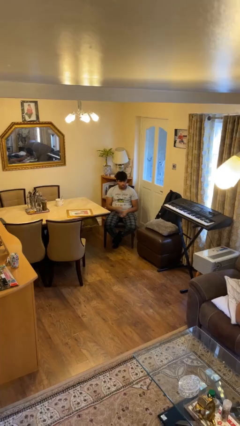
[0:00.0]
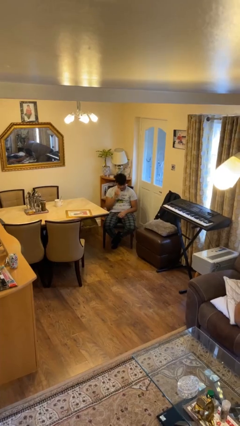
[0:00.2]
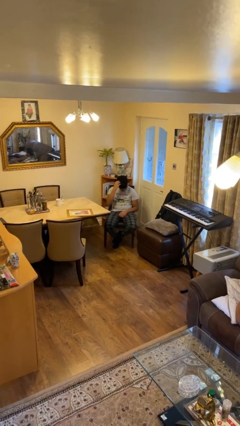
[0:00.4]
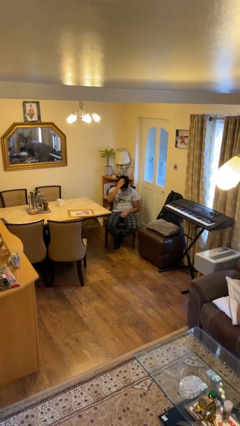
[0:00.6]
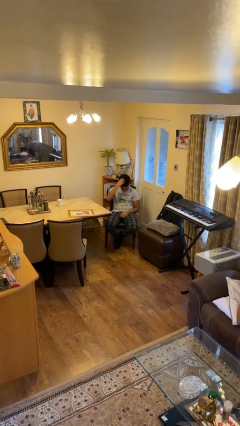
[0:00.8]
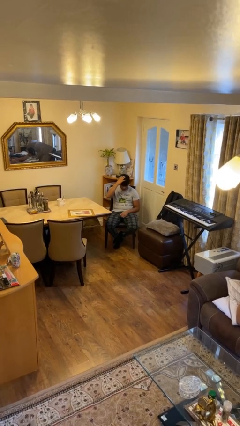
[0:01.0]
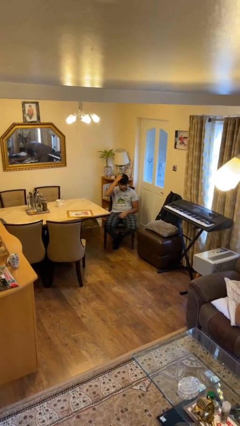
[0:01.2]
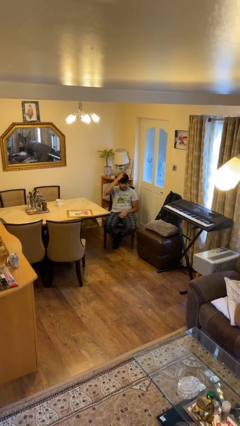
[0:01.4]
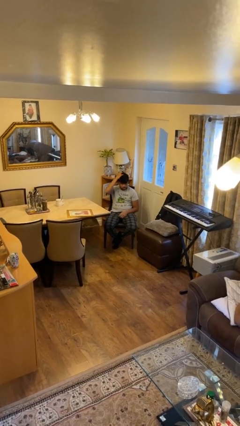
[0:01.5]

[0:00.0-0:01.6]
person strokes hair

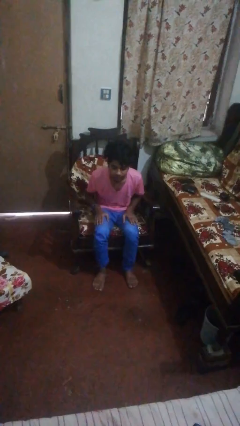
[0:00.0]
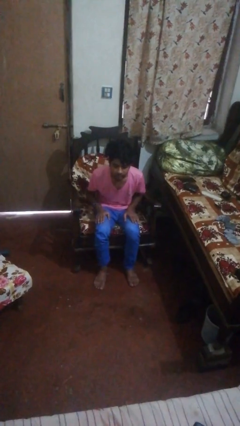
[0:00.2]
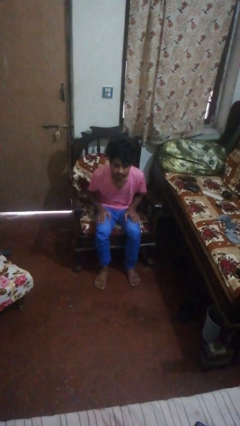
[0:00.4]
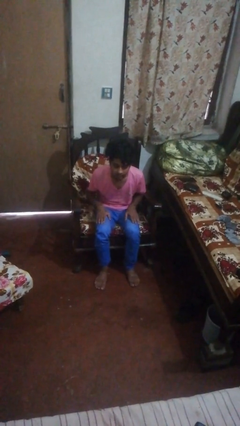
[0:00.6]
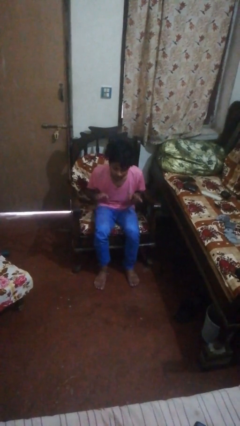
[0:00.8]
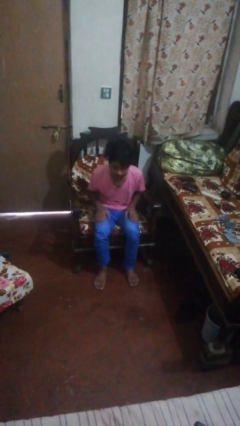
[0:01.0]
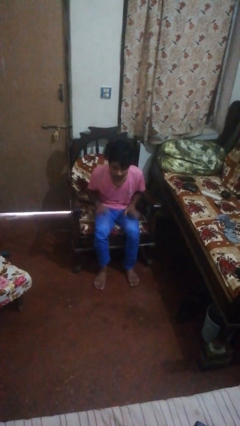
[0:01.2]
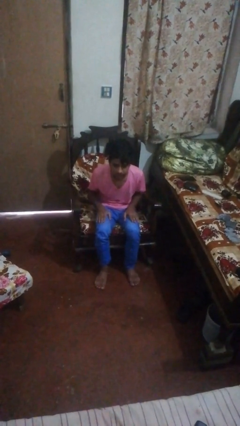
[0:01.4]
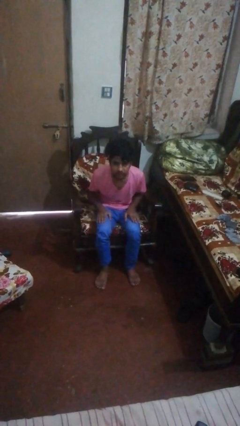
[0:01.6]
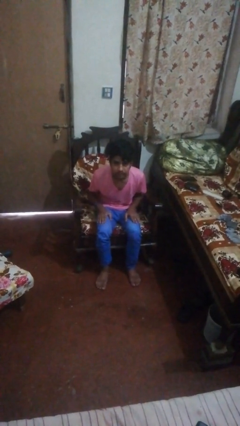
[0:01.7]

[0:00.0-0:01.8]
person slaps hands on thighs

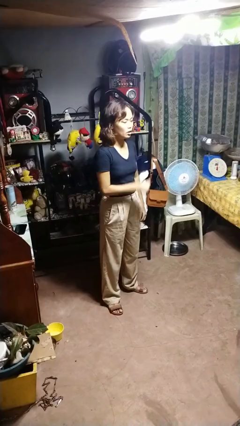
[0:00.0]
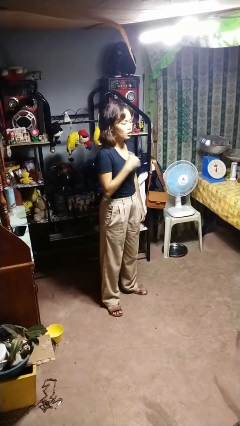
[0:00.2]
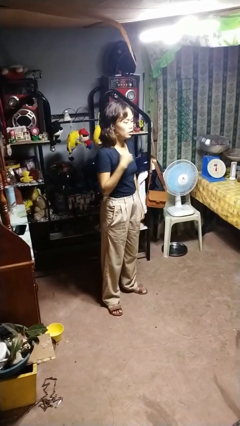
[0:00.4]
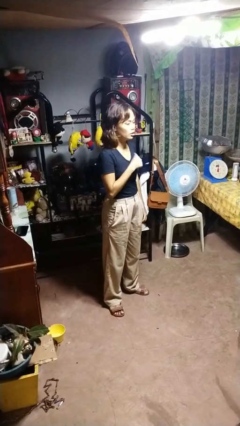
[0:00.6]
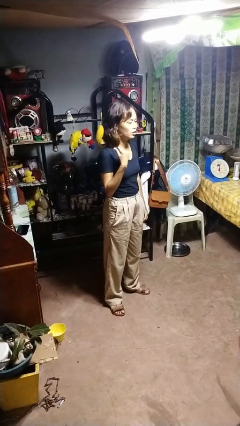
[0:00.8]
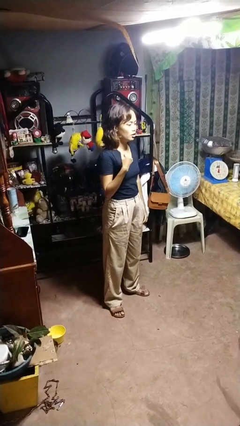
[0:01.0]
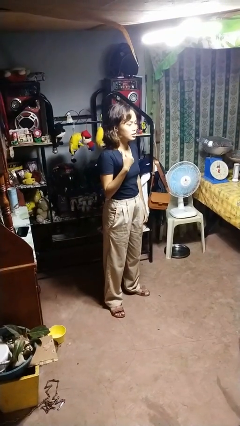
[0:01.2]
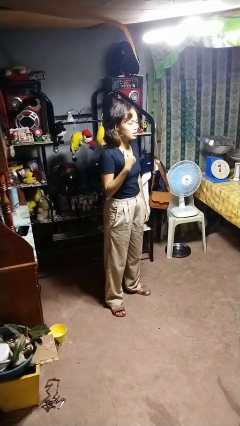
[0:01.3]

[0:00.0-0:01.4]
person gestures cut

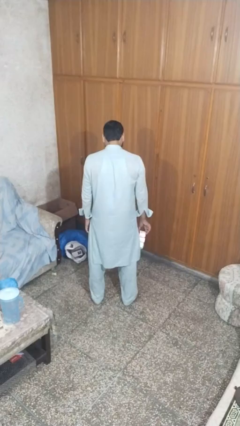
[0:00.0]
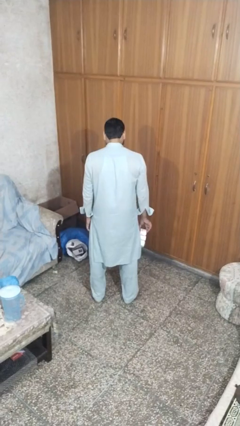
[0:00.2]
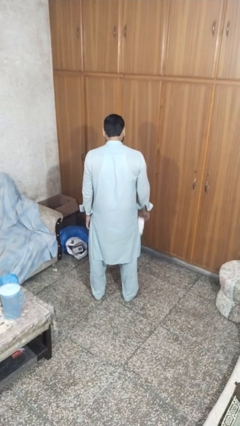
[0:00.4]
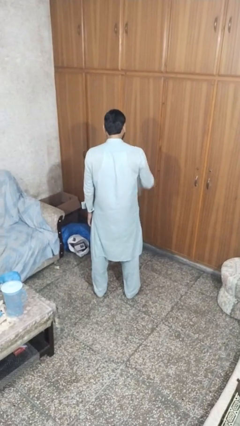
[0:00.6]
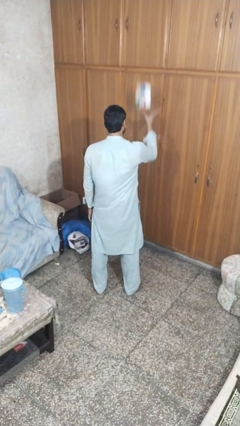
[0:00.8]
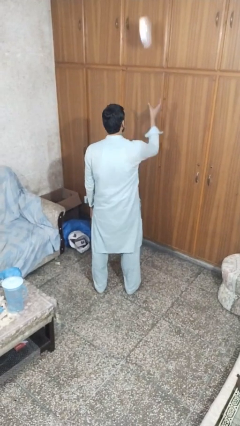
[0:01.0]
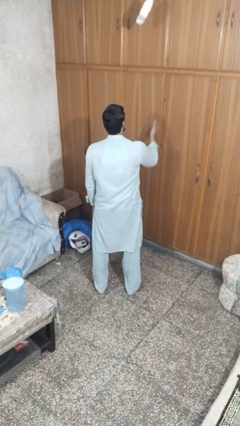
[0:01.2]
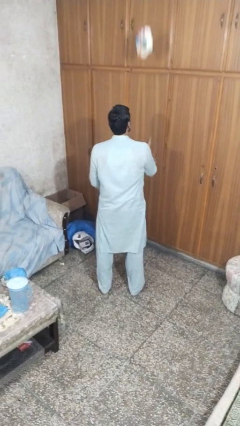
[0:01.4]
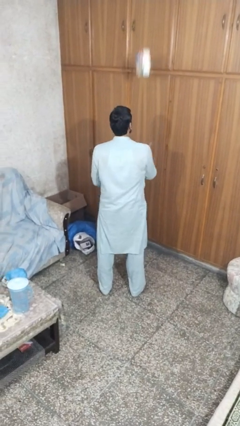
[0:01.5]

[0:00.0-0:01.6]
person drops object

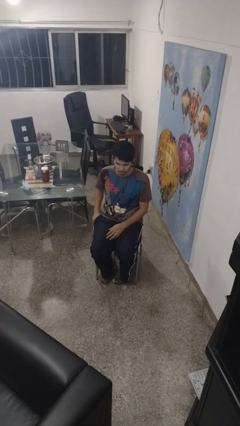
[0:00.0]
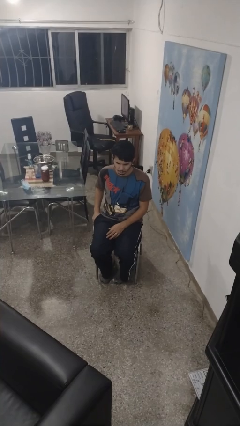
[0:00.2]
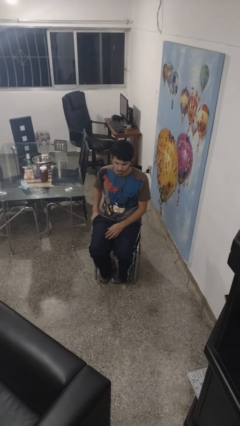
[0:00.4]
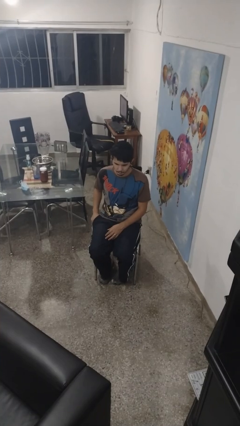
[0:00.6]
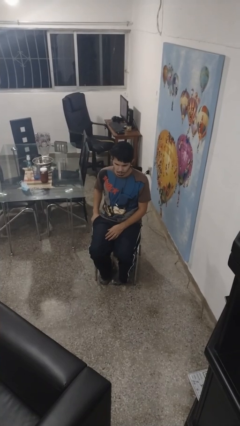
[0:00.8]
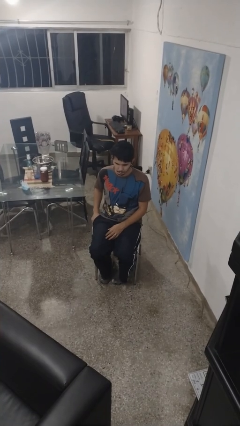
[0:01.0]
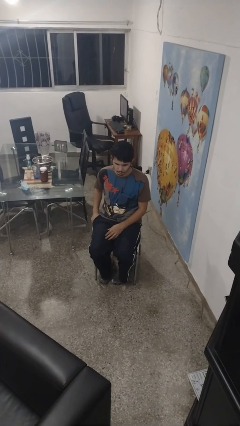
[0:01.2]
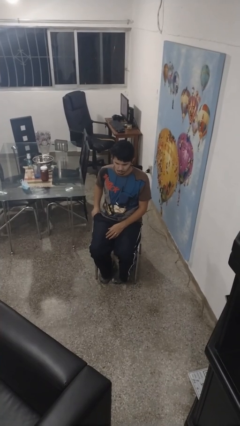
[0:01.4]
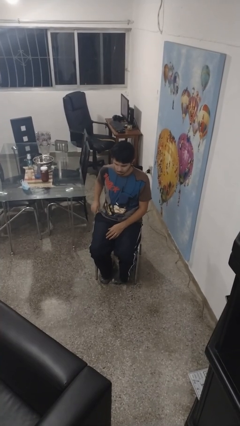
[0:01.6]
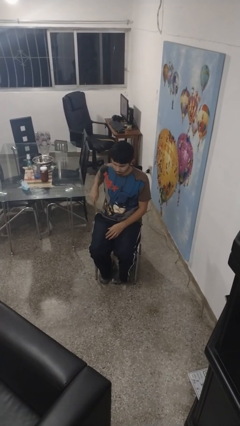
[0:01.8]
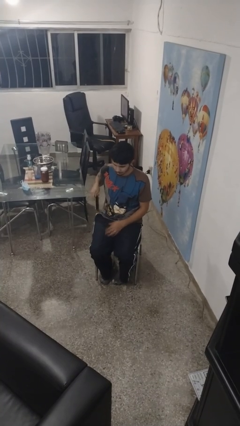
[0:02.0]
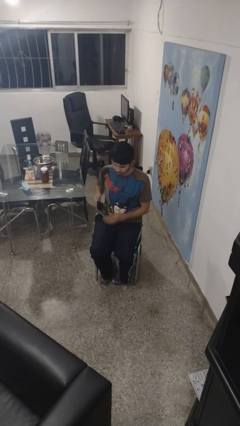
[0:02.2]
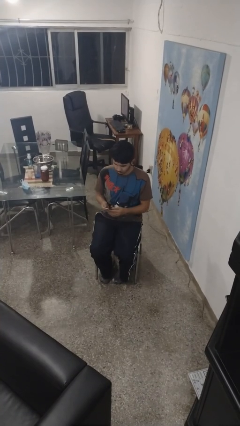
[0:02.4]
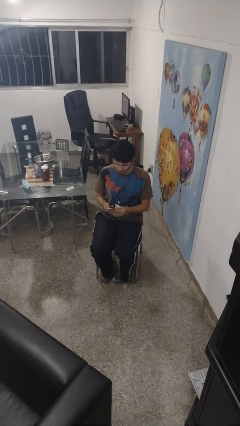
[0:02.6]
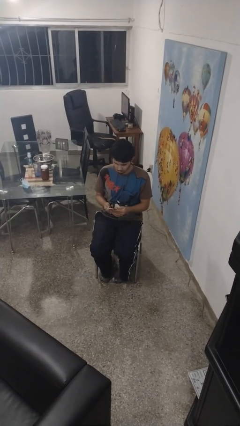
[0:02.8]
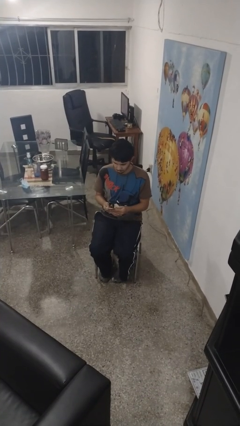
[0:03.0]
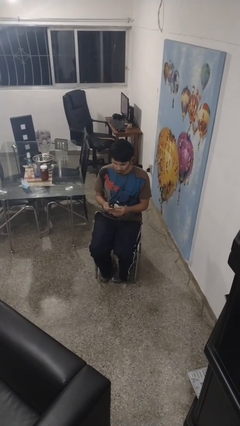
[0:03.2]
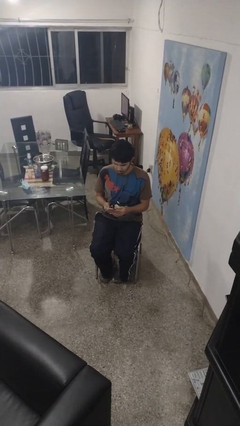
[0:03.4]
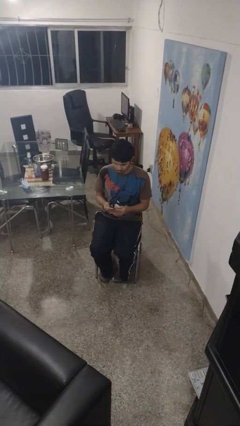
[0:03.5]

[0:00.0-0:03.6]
person takes phone from pocket

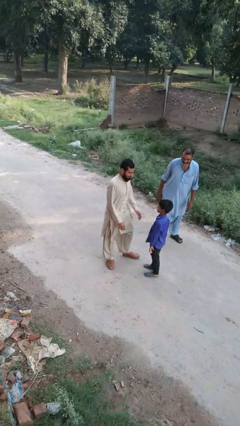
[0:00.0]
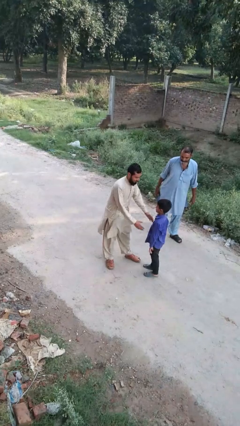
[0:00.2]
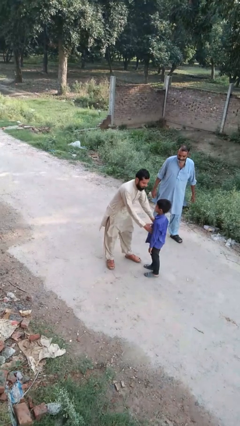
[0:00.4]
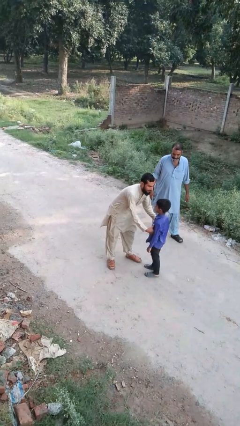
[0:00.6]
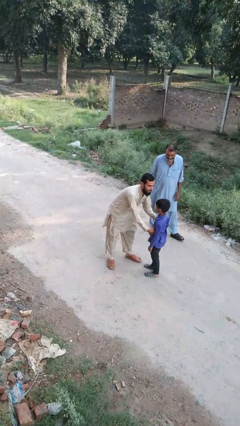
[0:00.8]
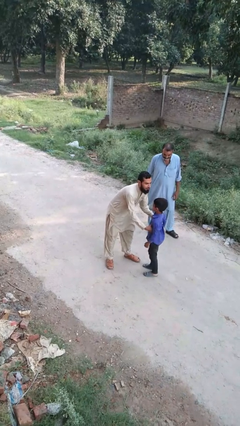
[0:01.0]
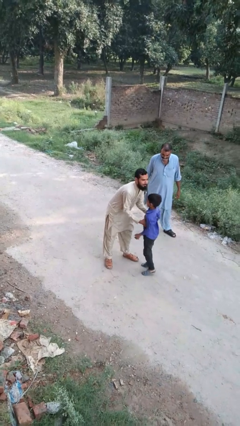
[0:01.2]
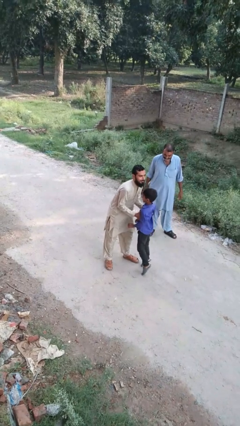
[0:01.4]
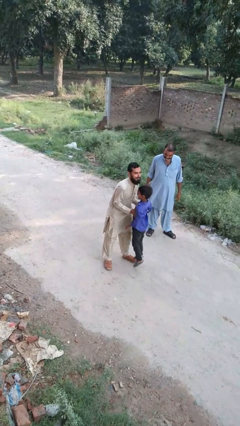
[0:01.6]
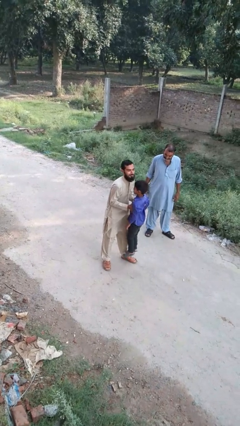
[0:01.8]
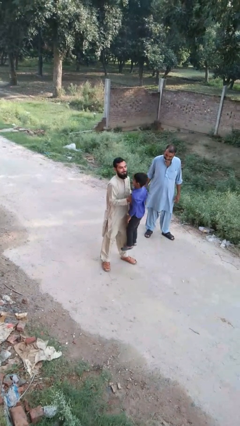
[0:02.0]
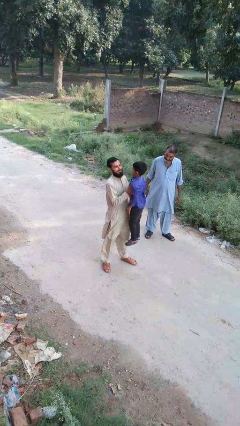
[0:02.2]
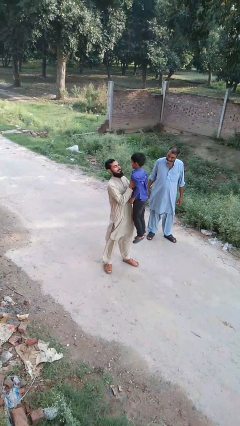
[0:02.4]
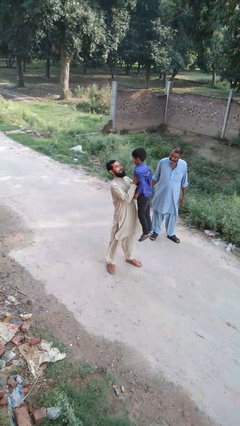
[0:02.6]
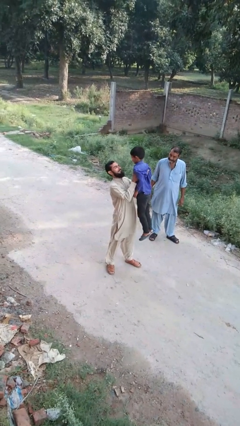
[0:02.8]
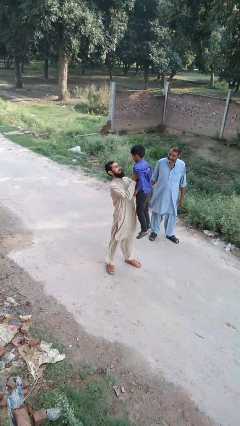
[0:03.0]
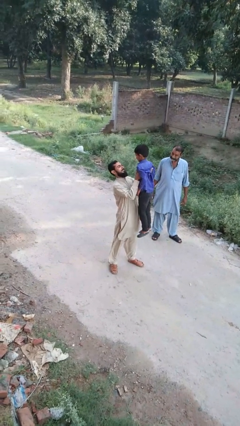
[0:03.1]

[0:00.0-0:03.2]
person picks up person

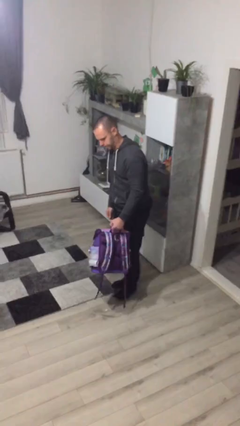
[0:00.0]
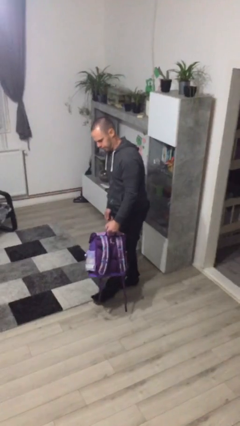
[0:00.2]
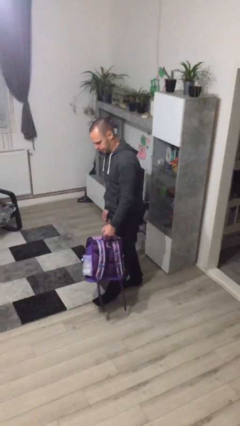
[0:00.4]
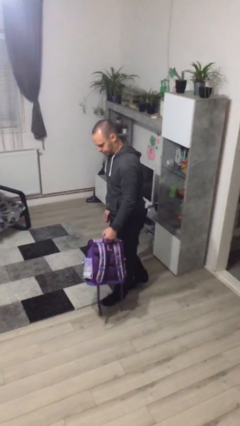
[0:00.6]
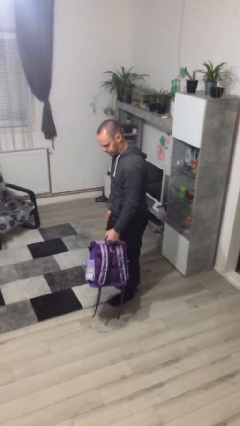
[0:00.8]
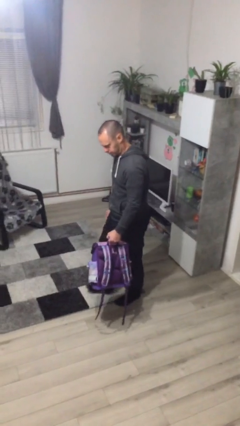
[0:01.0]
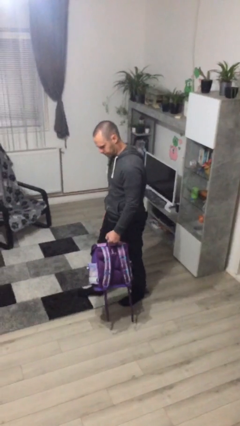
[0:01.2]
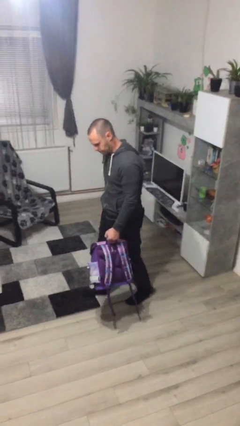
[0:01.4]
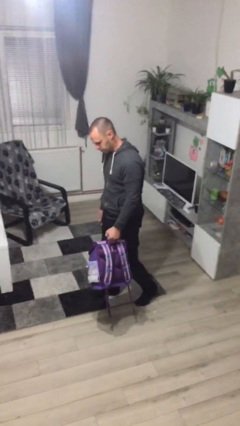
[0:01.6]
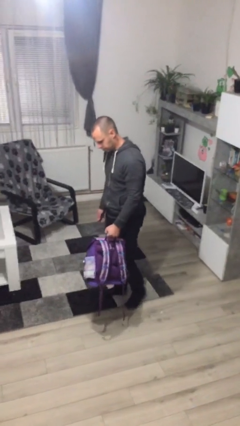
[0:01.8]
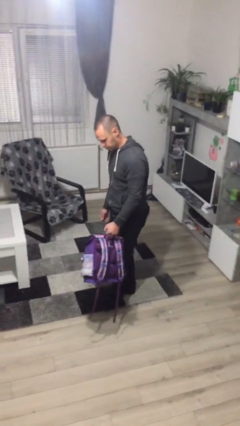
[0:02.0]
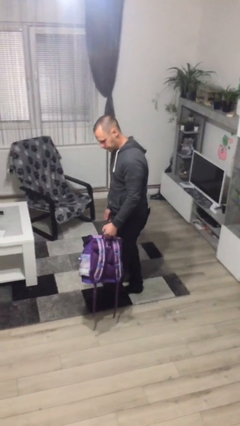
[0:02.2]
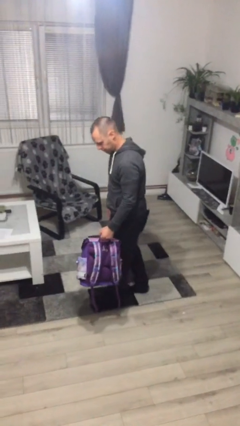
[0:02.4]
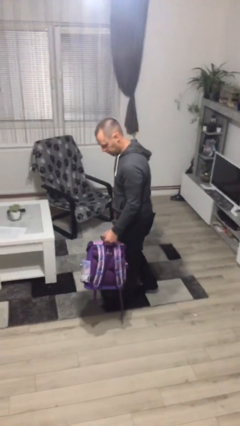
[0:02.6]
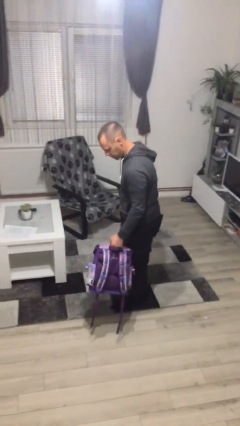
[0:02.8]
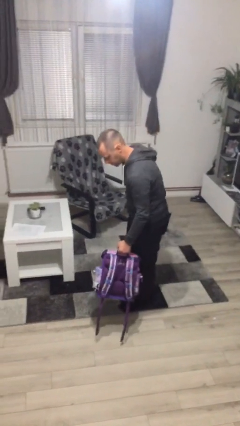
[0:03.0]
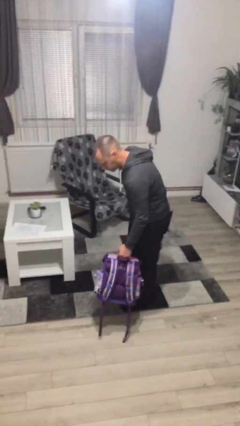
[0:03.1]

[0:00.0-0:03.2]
person carries heavy object

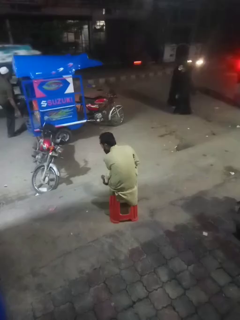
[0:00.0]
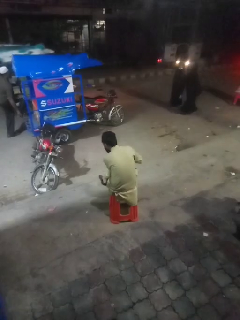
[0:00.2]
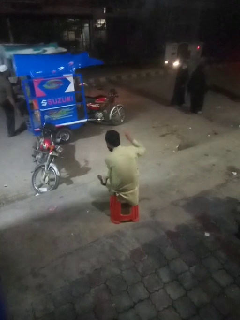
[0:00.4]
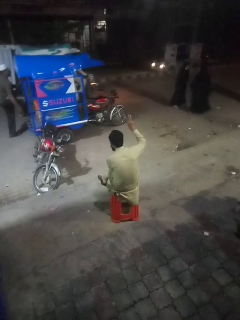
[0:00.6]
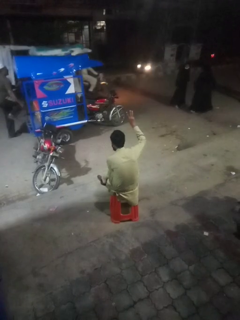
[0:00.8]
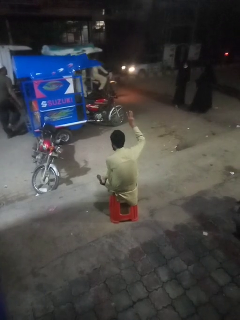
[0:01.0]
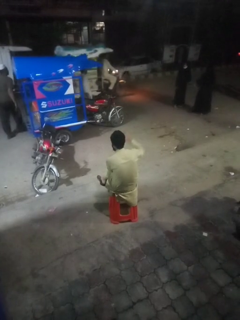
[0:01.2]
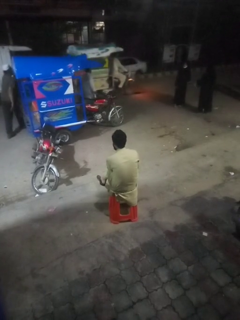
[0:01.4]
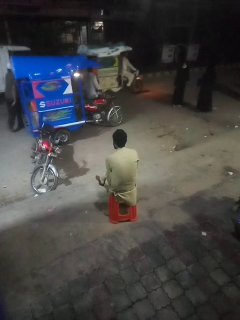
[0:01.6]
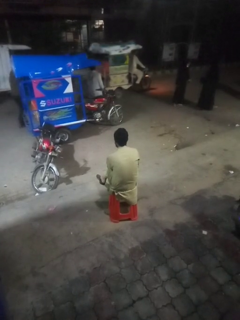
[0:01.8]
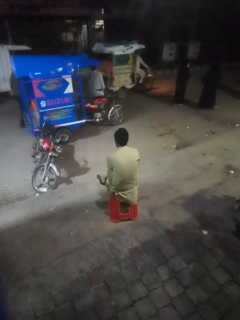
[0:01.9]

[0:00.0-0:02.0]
person gestures number three
